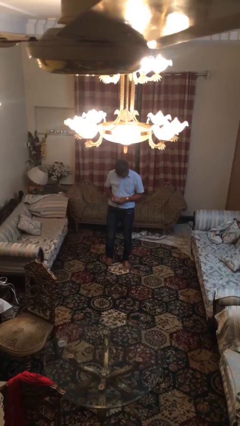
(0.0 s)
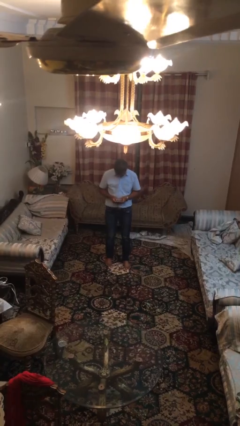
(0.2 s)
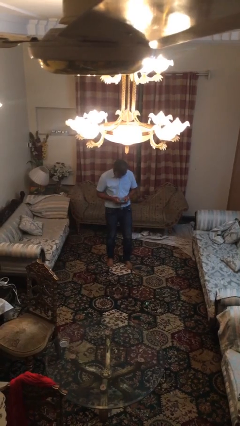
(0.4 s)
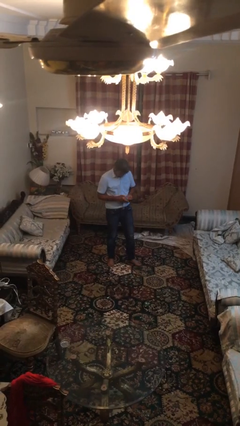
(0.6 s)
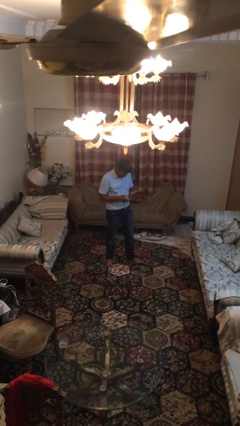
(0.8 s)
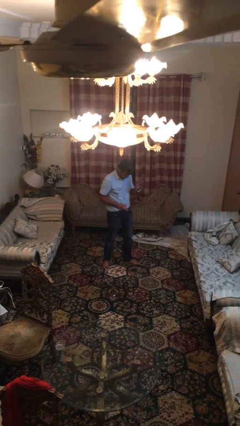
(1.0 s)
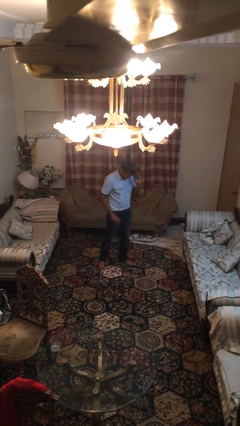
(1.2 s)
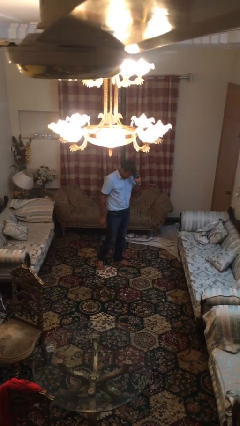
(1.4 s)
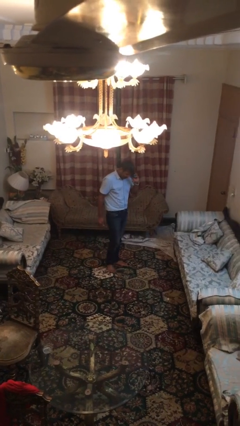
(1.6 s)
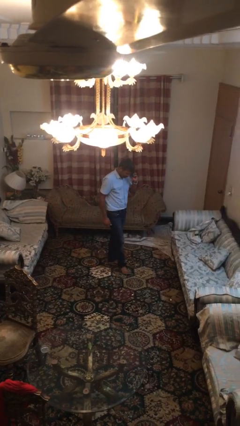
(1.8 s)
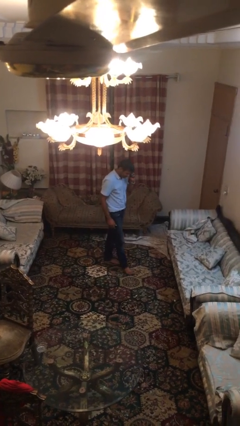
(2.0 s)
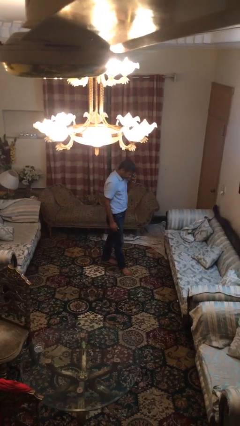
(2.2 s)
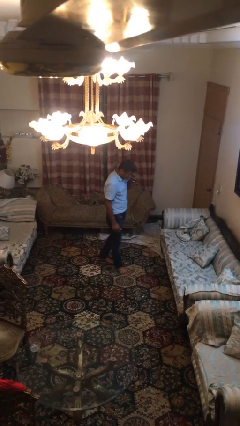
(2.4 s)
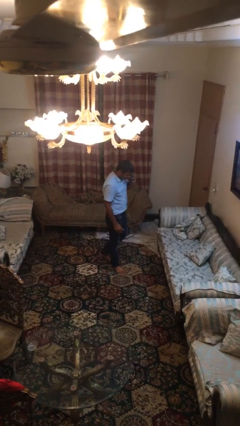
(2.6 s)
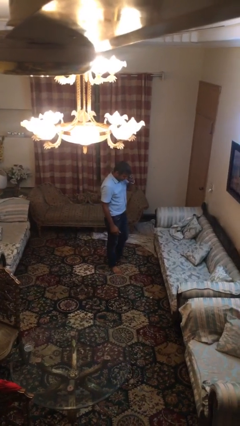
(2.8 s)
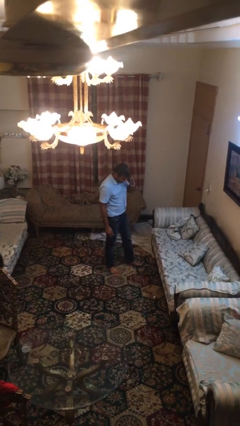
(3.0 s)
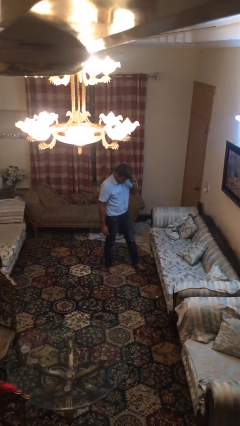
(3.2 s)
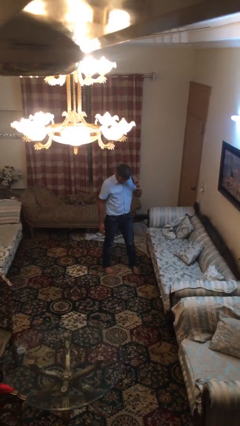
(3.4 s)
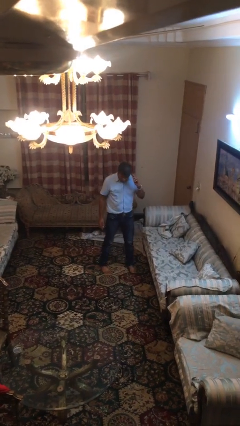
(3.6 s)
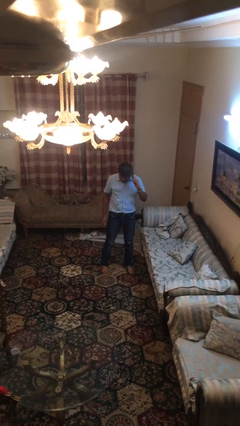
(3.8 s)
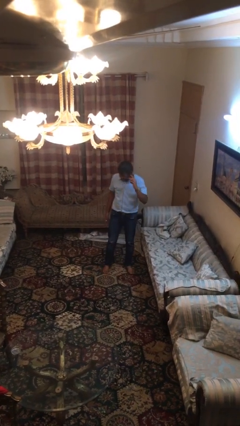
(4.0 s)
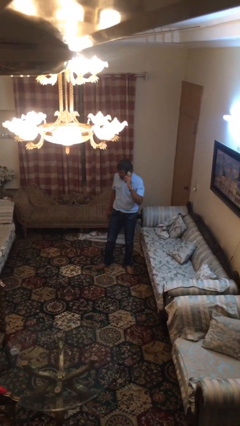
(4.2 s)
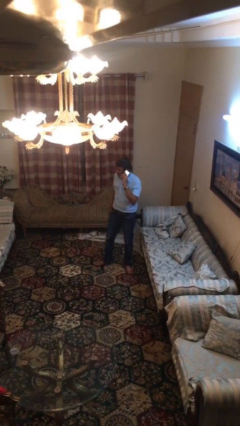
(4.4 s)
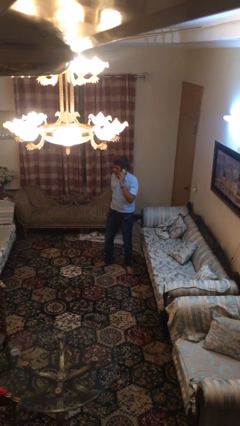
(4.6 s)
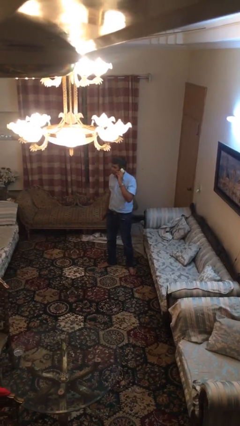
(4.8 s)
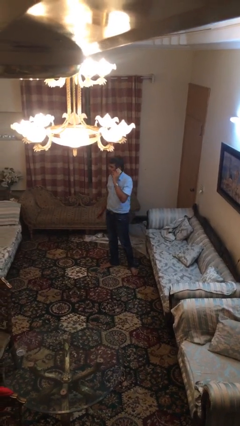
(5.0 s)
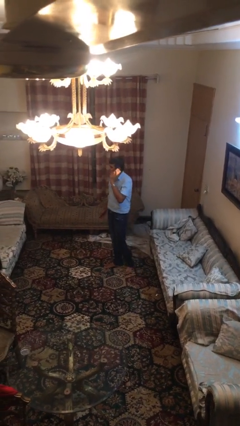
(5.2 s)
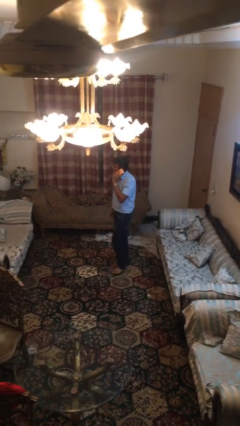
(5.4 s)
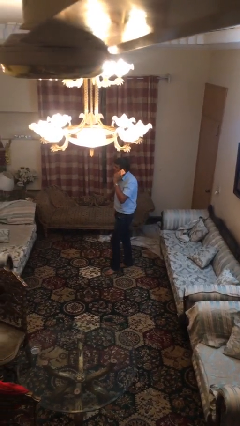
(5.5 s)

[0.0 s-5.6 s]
person talks on phone

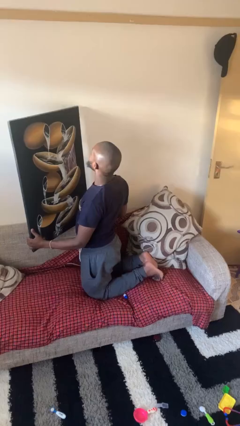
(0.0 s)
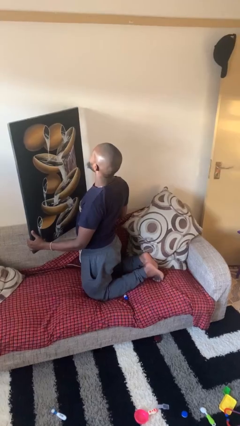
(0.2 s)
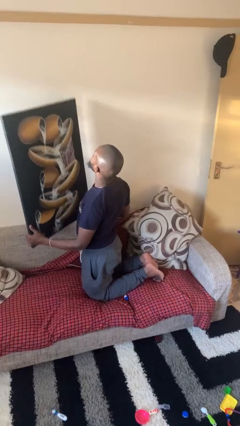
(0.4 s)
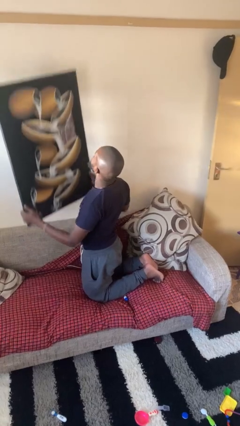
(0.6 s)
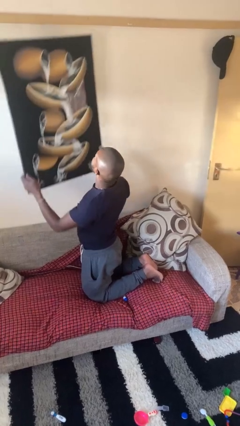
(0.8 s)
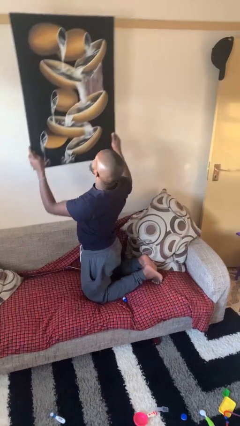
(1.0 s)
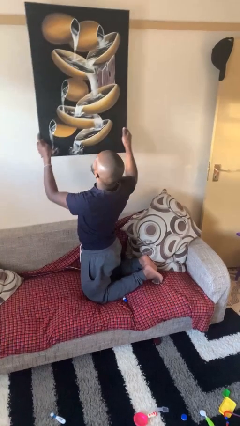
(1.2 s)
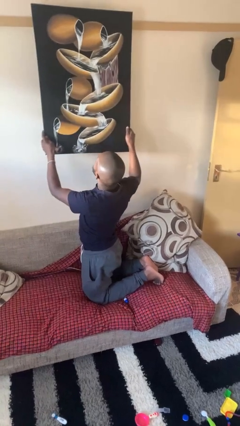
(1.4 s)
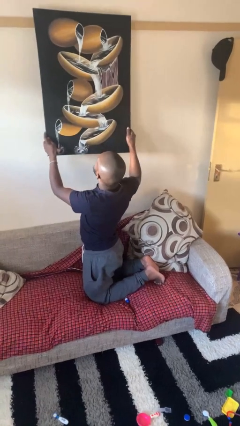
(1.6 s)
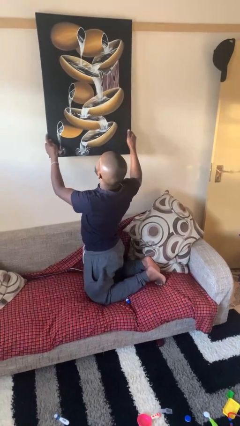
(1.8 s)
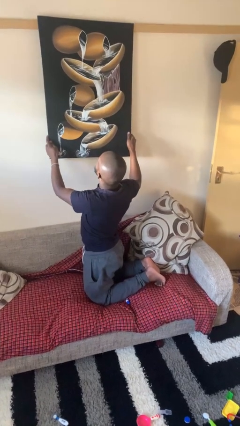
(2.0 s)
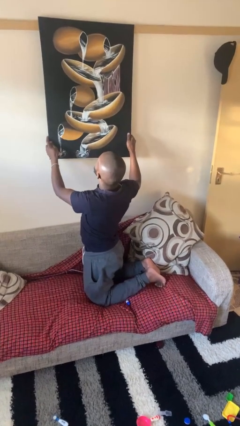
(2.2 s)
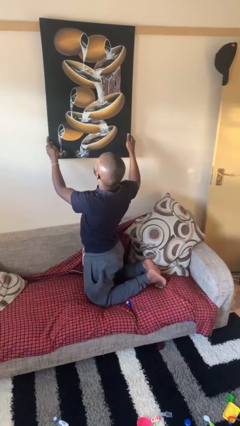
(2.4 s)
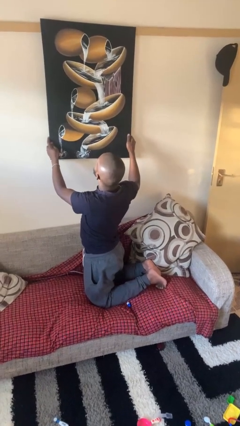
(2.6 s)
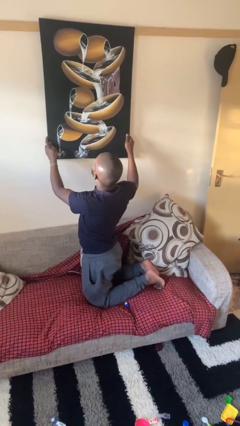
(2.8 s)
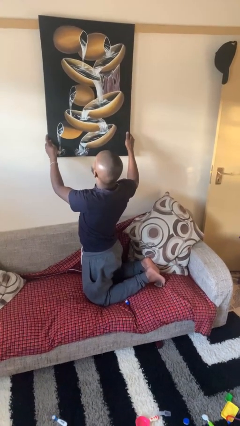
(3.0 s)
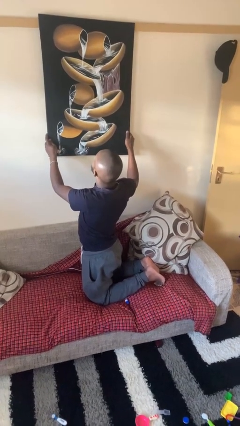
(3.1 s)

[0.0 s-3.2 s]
person puts up picture frame

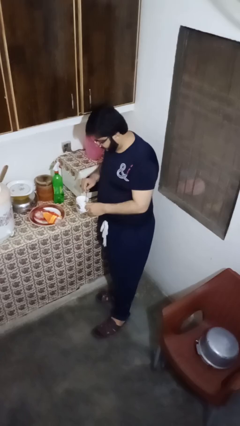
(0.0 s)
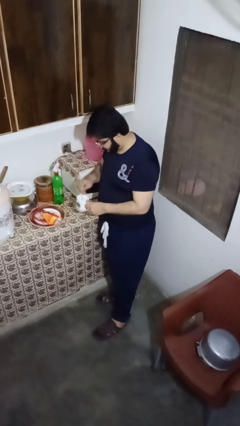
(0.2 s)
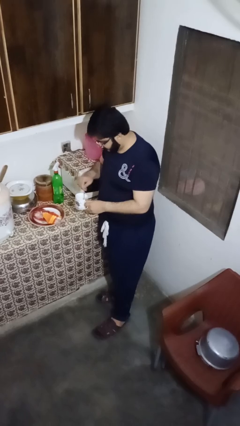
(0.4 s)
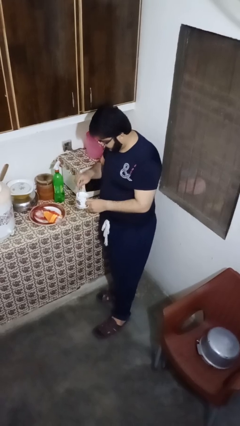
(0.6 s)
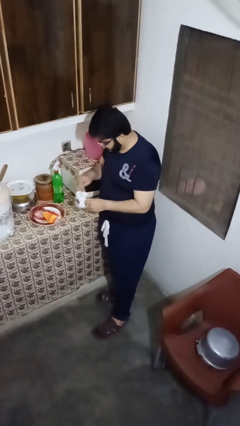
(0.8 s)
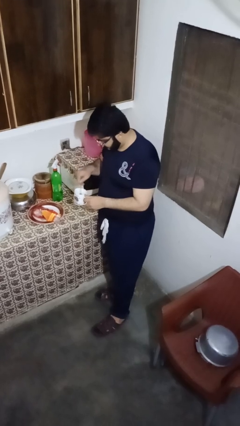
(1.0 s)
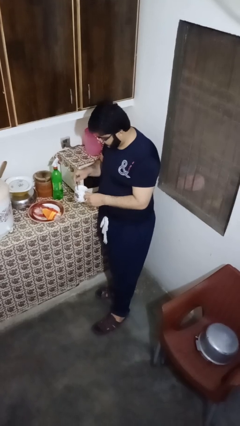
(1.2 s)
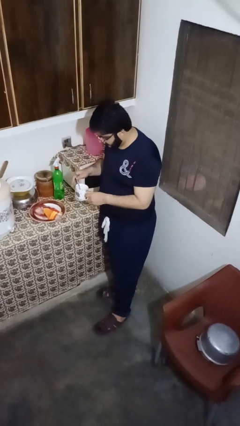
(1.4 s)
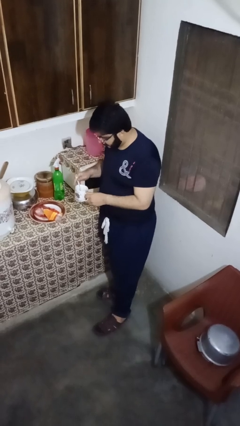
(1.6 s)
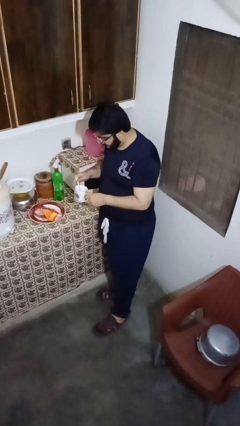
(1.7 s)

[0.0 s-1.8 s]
person stirs mug

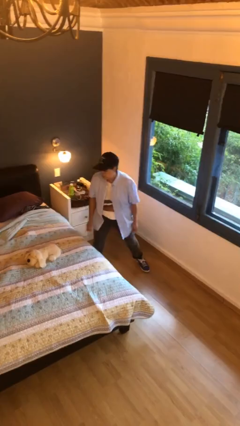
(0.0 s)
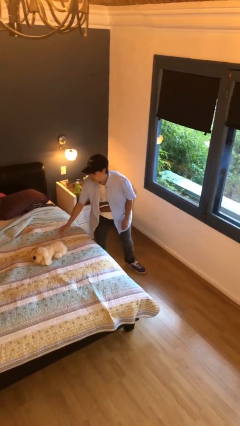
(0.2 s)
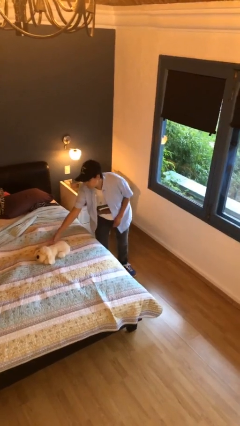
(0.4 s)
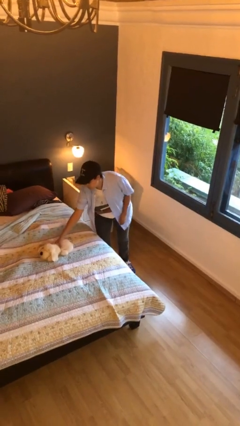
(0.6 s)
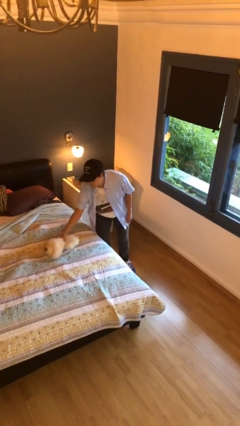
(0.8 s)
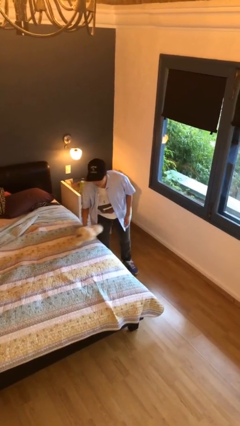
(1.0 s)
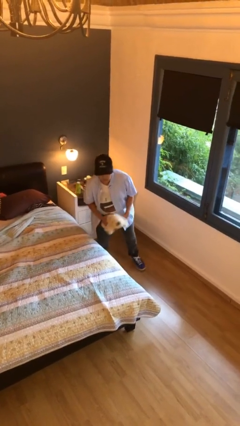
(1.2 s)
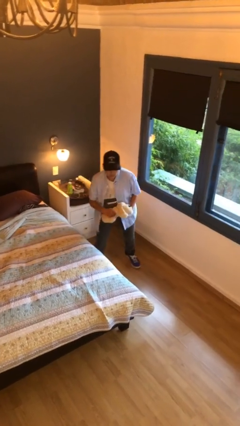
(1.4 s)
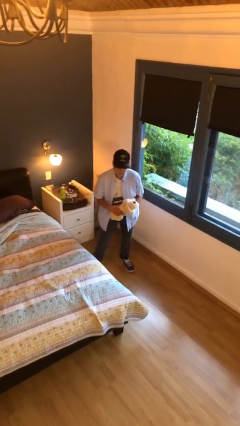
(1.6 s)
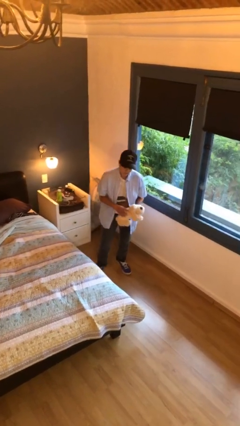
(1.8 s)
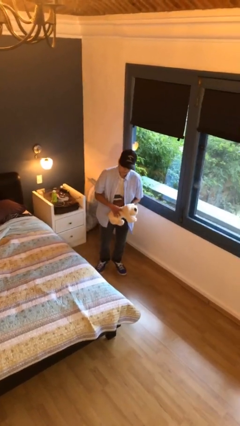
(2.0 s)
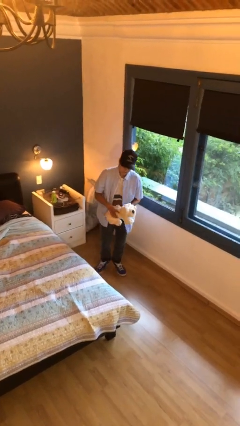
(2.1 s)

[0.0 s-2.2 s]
person picks up object from bed

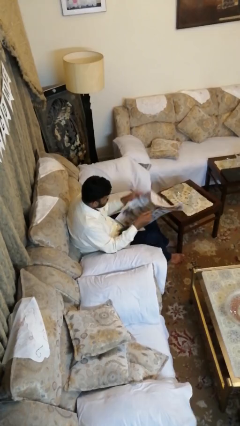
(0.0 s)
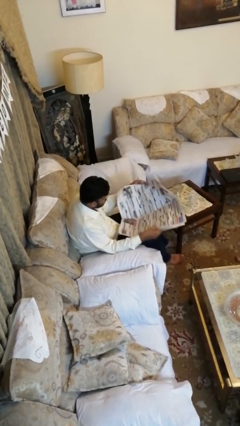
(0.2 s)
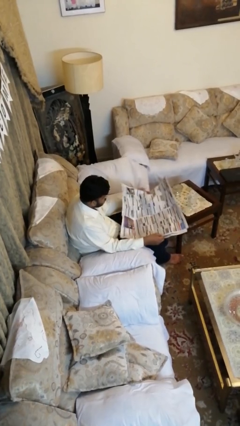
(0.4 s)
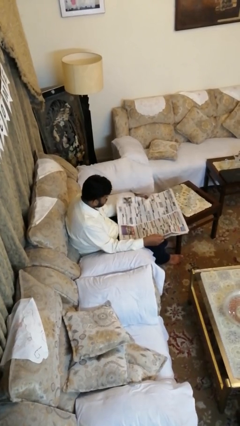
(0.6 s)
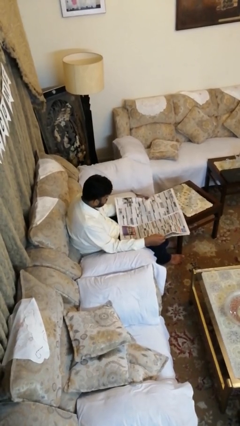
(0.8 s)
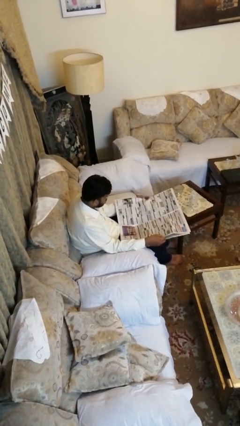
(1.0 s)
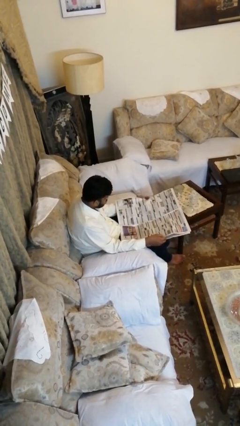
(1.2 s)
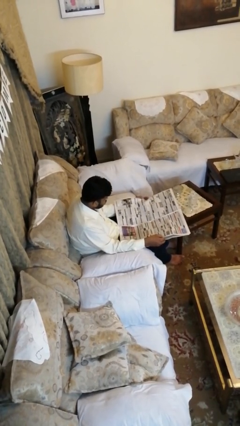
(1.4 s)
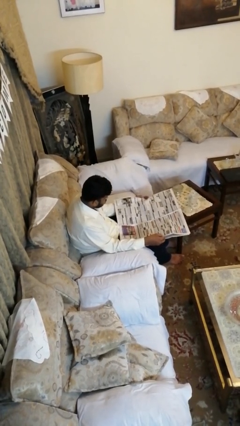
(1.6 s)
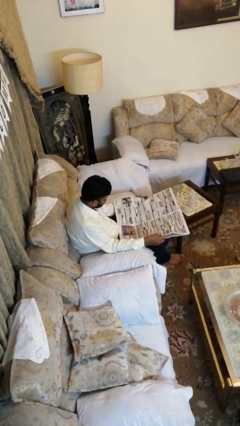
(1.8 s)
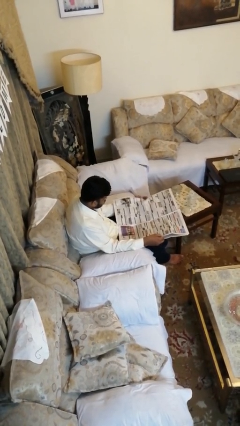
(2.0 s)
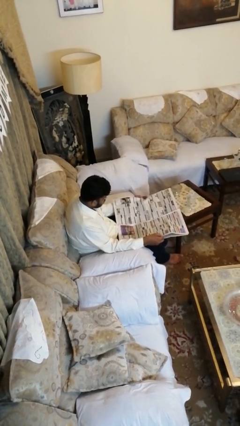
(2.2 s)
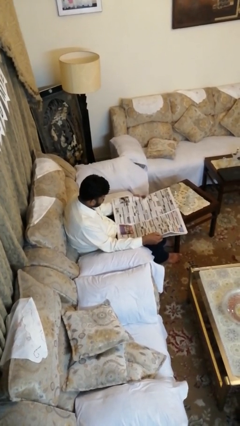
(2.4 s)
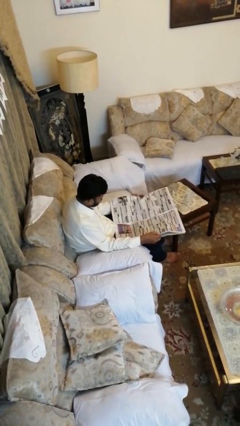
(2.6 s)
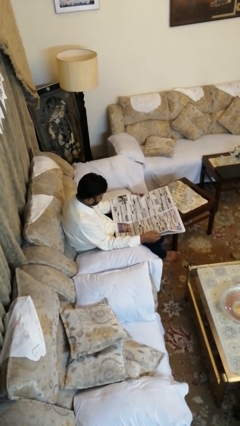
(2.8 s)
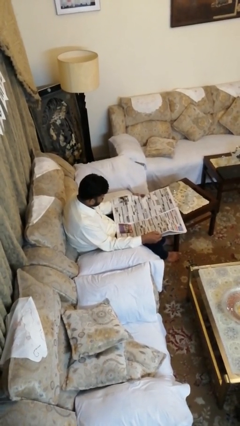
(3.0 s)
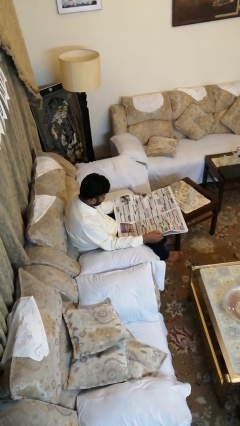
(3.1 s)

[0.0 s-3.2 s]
person reads newspaper

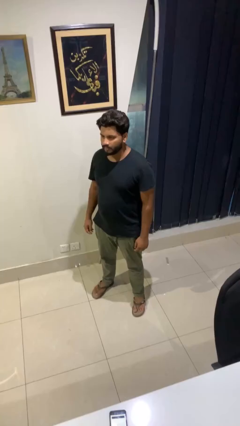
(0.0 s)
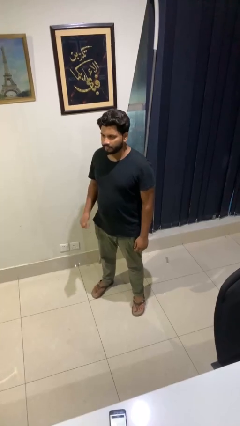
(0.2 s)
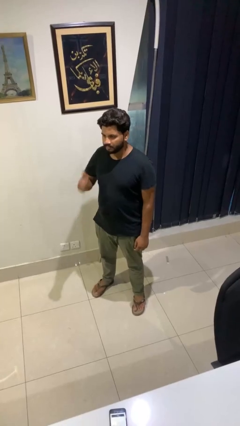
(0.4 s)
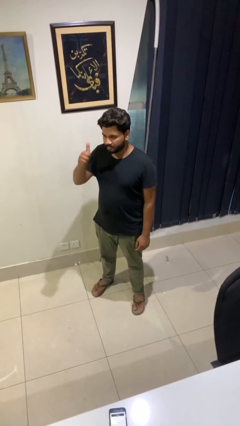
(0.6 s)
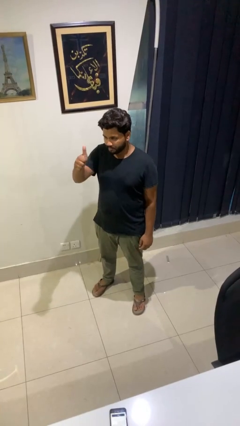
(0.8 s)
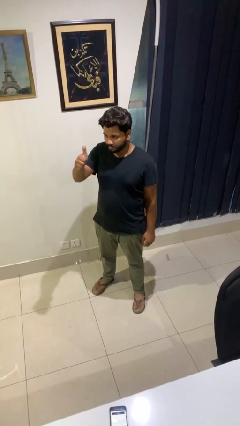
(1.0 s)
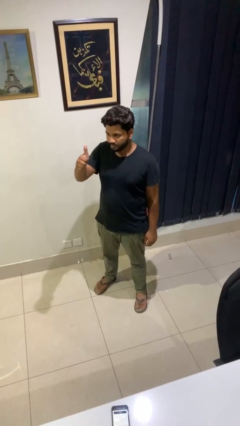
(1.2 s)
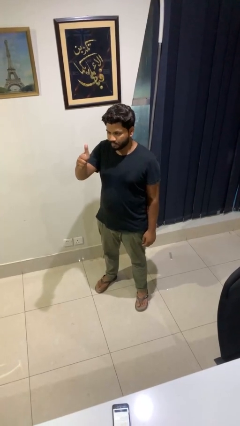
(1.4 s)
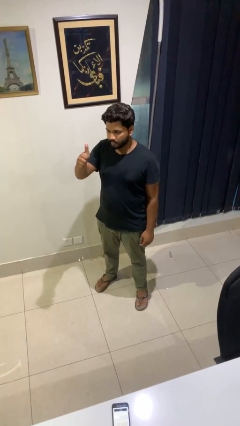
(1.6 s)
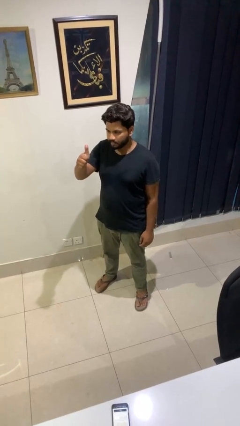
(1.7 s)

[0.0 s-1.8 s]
person gestures thumbs up
